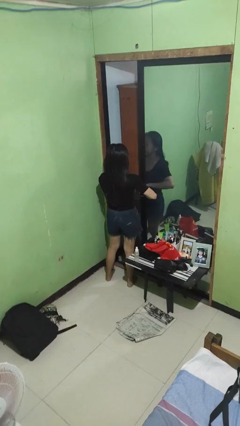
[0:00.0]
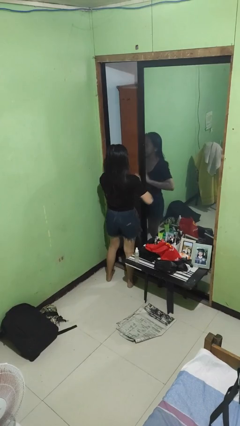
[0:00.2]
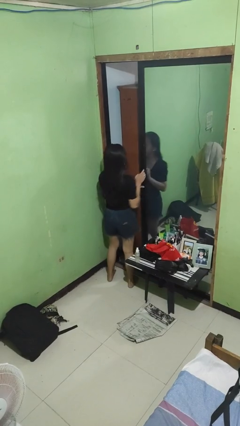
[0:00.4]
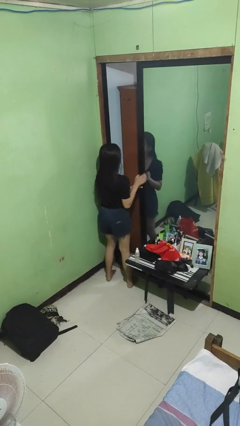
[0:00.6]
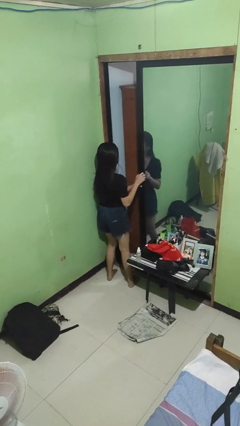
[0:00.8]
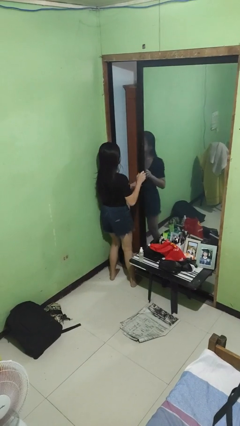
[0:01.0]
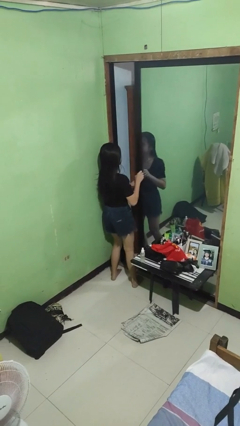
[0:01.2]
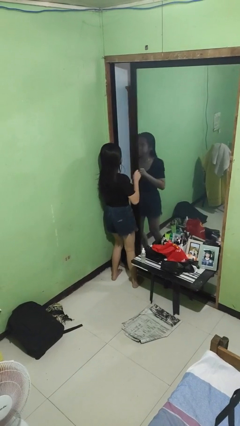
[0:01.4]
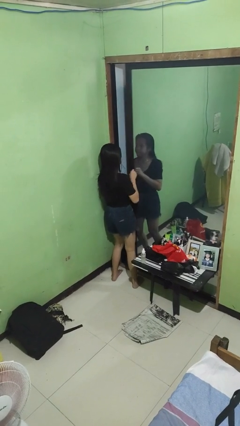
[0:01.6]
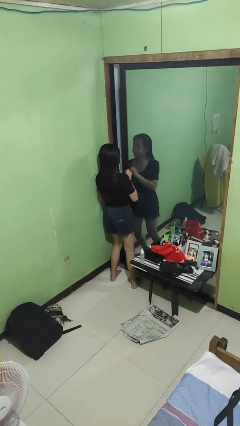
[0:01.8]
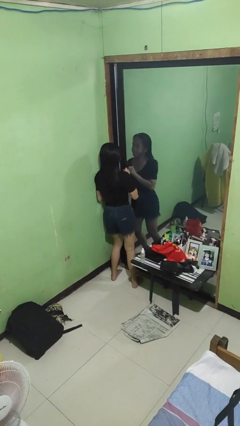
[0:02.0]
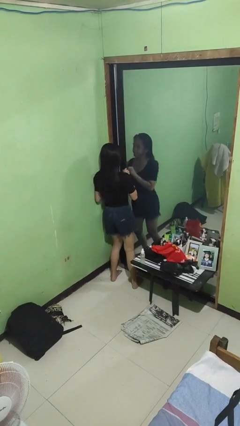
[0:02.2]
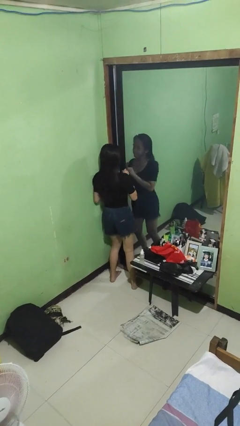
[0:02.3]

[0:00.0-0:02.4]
person closes sliding door

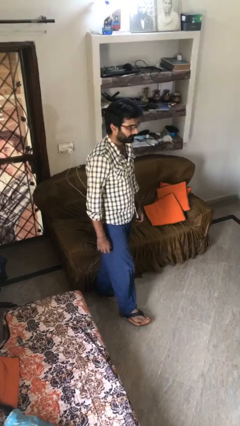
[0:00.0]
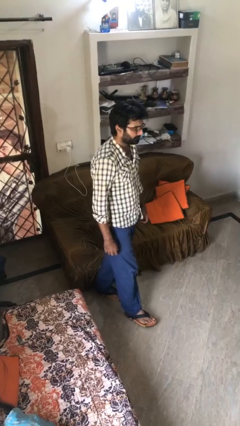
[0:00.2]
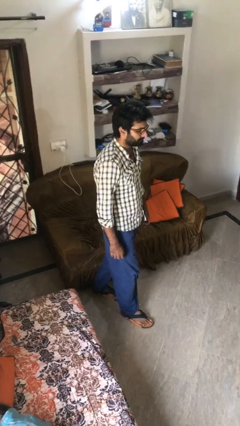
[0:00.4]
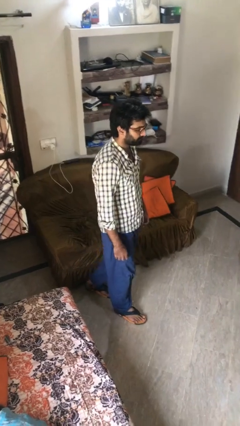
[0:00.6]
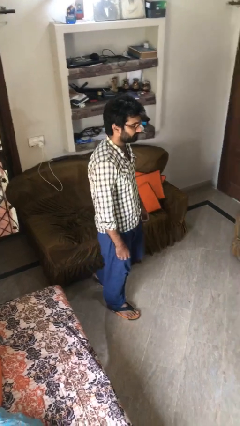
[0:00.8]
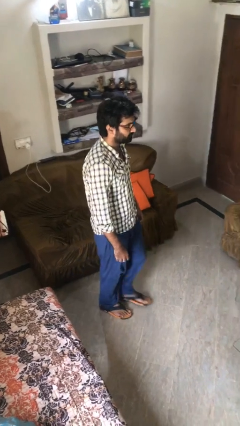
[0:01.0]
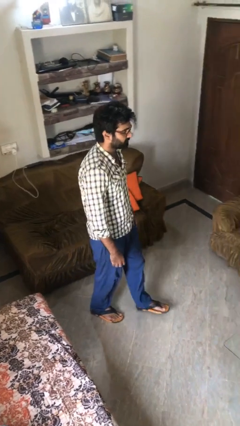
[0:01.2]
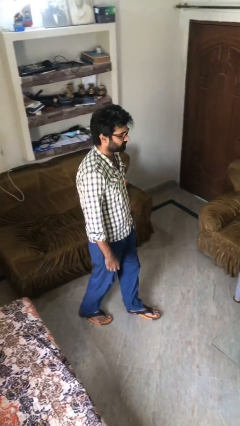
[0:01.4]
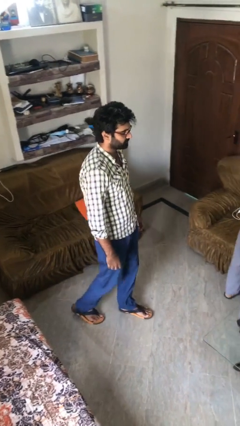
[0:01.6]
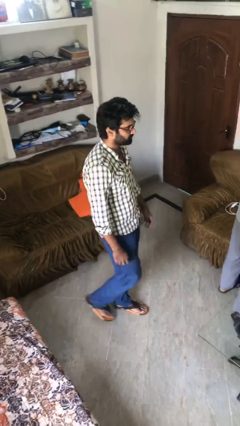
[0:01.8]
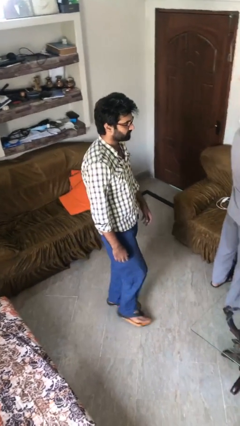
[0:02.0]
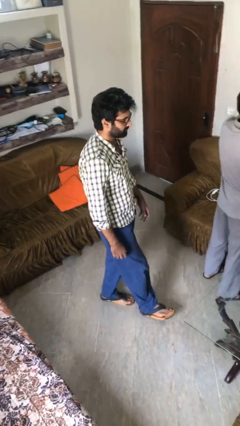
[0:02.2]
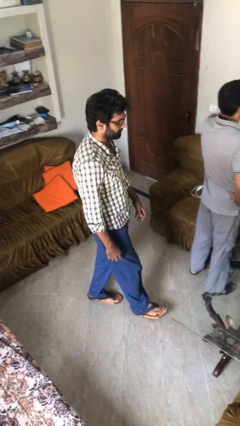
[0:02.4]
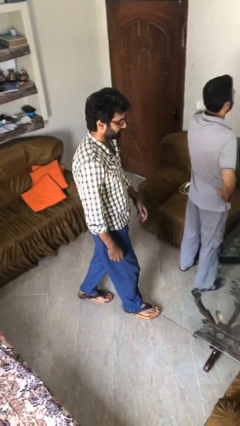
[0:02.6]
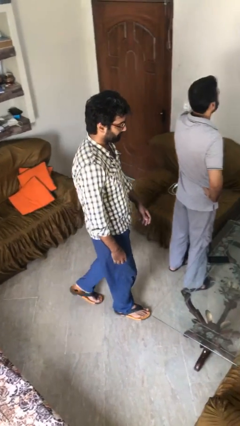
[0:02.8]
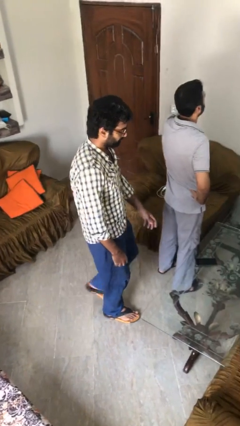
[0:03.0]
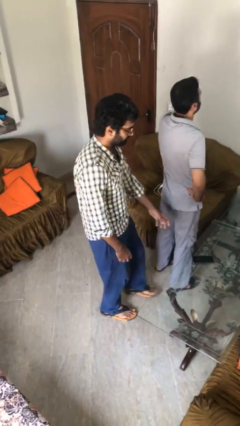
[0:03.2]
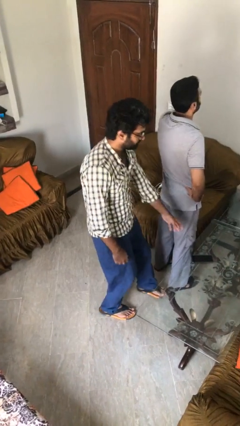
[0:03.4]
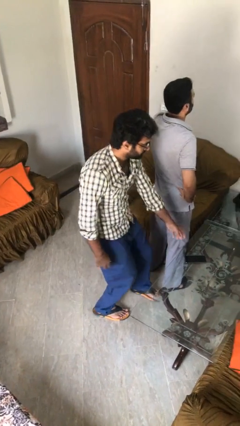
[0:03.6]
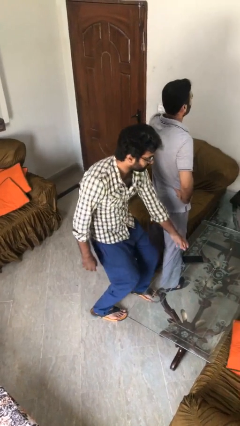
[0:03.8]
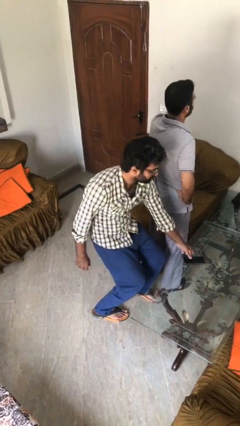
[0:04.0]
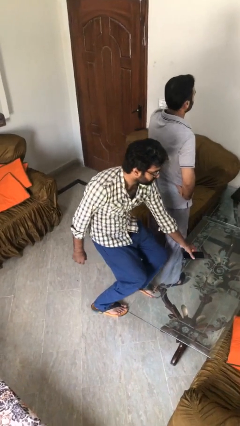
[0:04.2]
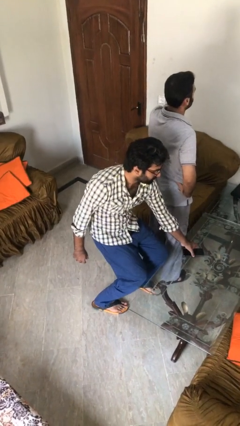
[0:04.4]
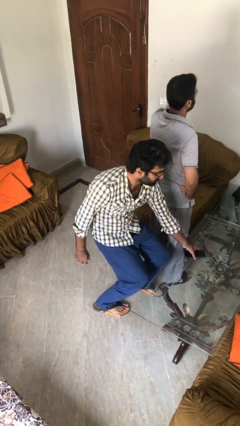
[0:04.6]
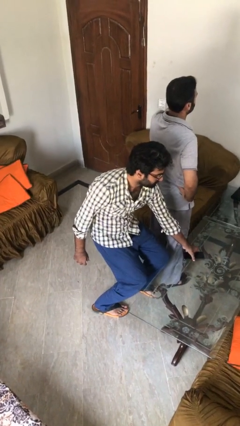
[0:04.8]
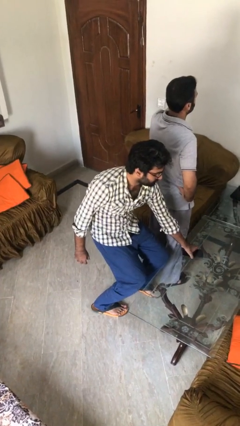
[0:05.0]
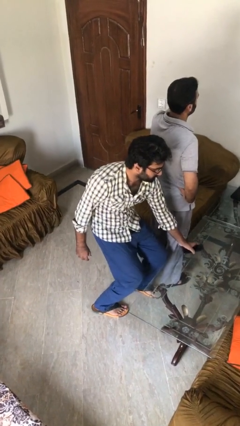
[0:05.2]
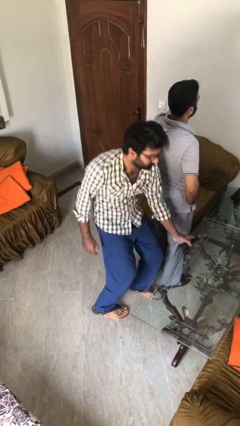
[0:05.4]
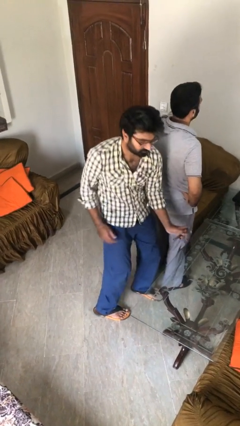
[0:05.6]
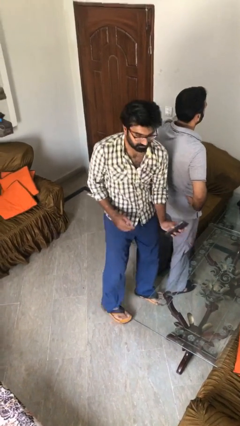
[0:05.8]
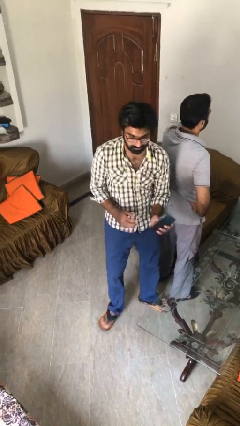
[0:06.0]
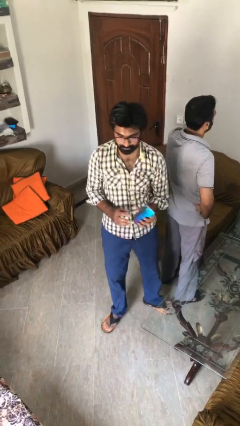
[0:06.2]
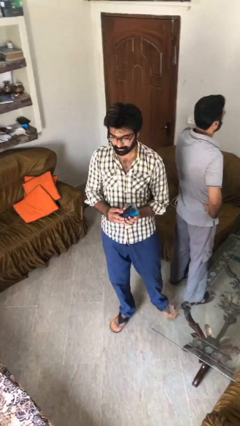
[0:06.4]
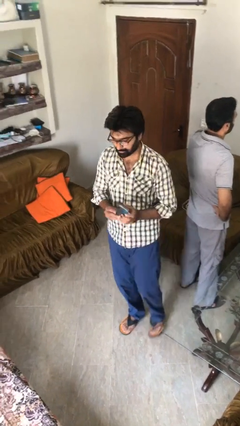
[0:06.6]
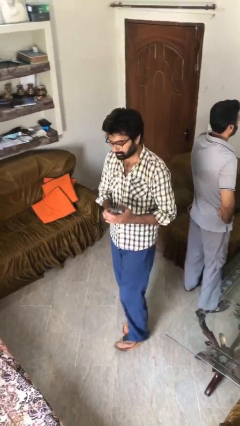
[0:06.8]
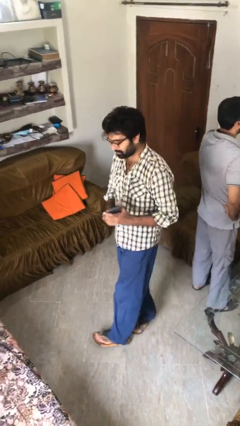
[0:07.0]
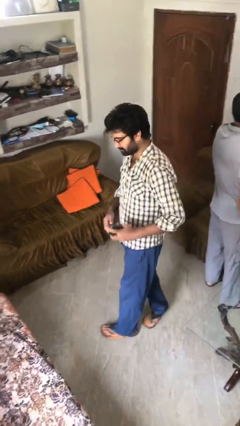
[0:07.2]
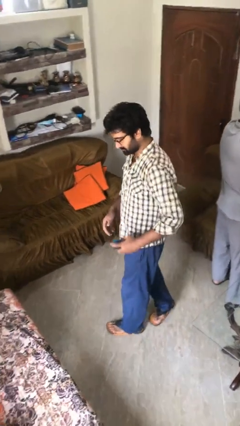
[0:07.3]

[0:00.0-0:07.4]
person steals object from person

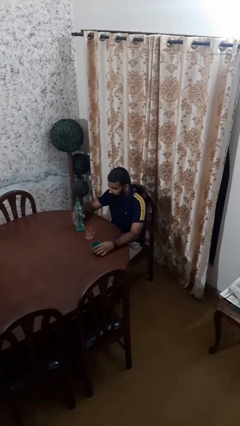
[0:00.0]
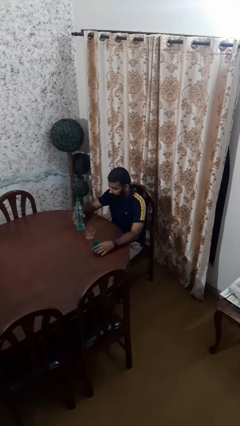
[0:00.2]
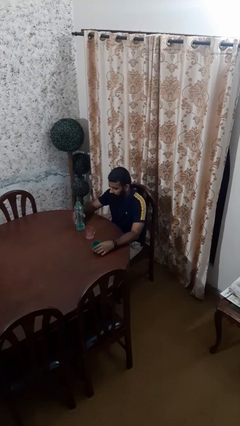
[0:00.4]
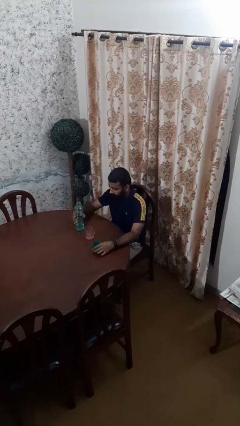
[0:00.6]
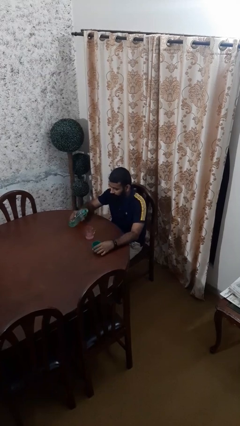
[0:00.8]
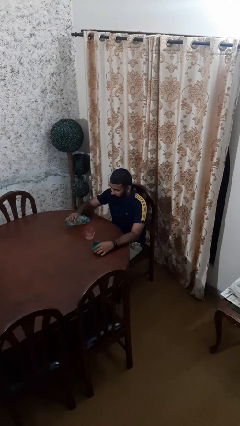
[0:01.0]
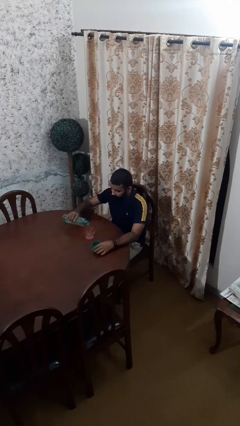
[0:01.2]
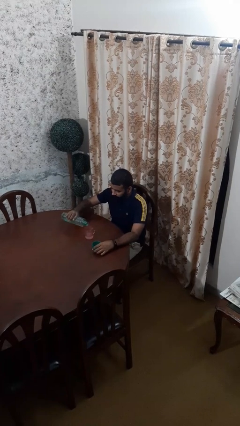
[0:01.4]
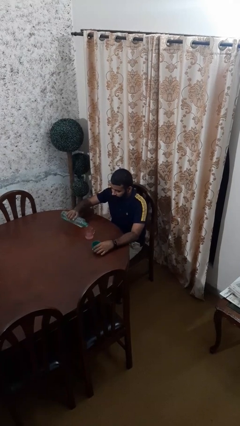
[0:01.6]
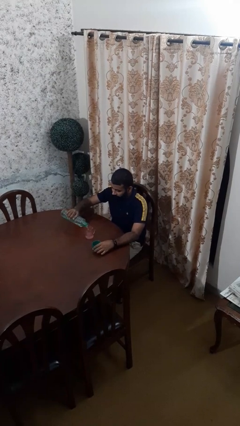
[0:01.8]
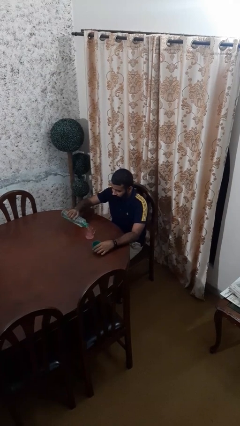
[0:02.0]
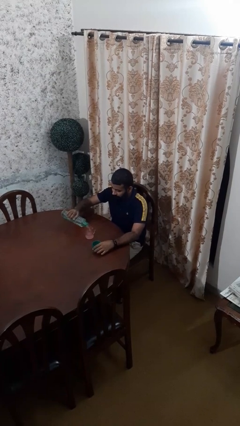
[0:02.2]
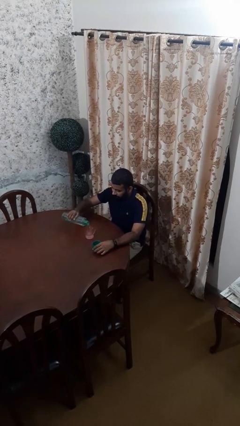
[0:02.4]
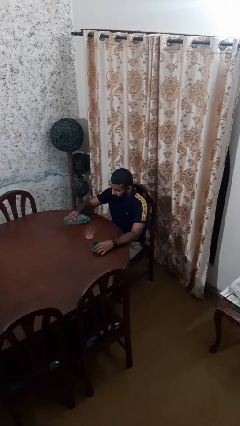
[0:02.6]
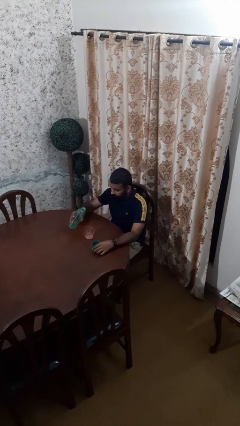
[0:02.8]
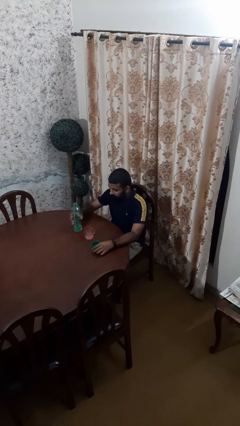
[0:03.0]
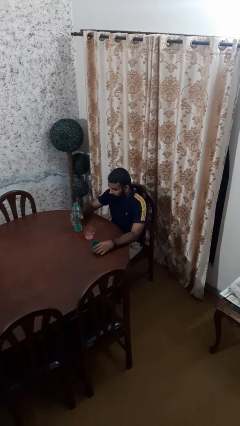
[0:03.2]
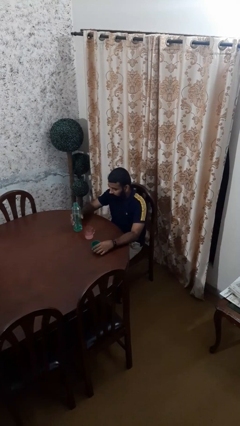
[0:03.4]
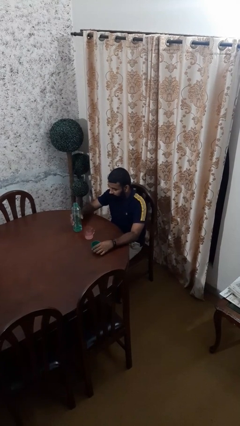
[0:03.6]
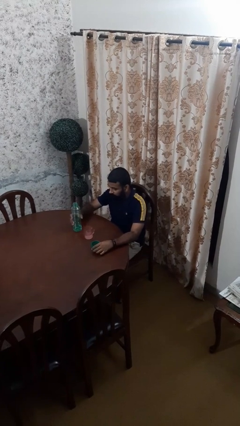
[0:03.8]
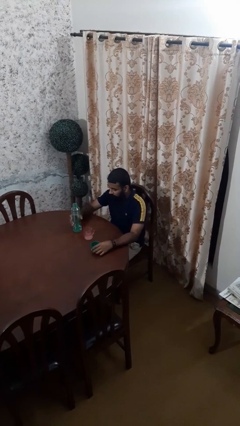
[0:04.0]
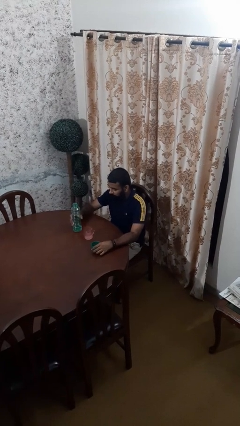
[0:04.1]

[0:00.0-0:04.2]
person pours liquid into cup

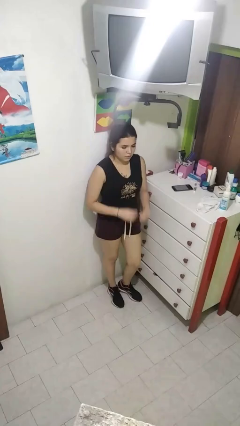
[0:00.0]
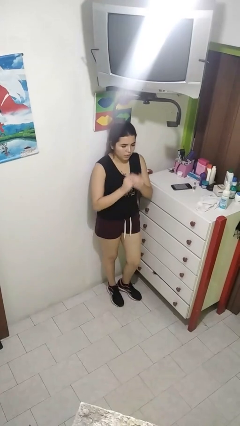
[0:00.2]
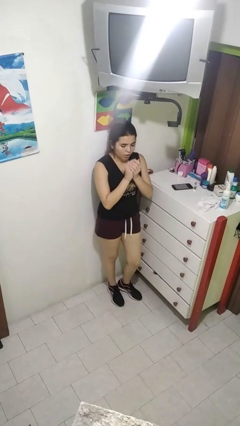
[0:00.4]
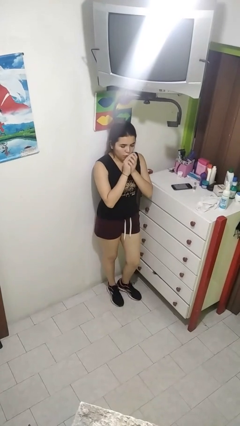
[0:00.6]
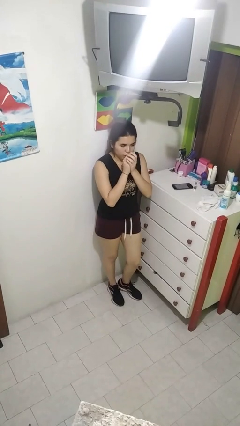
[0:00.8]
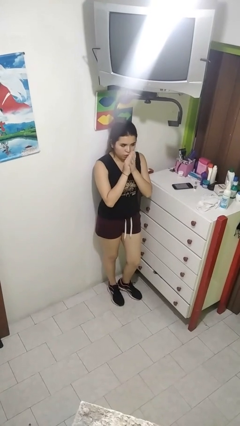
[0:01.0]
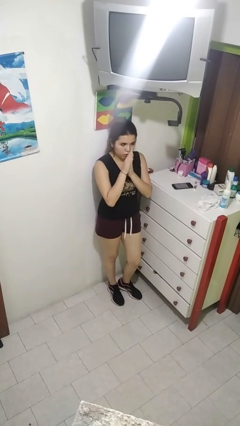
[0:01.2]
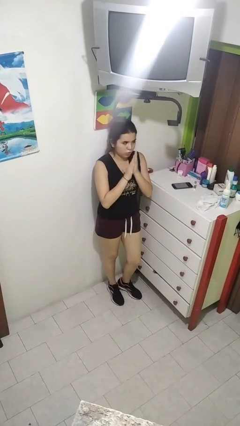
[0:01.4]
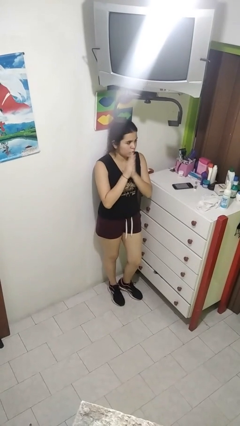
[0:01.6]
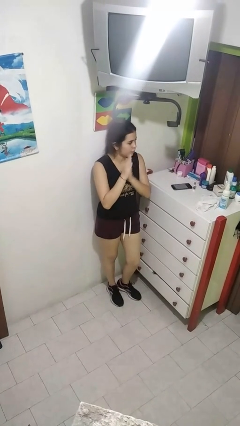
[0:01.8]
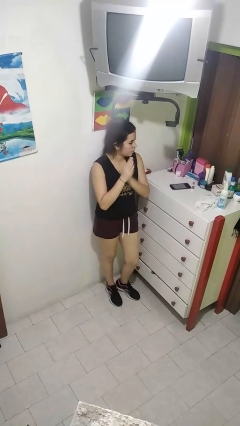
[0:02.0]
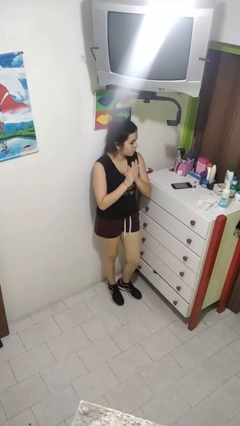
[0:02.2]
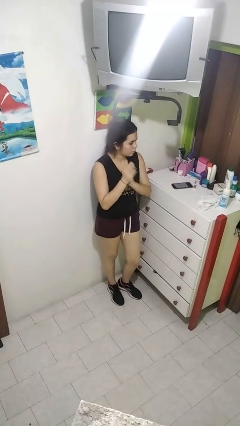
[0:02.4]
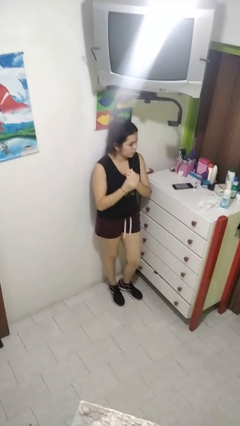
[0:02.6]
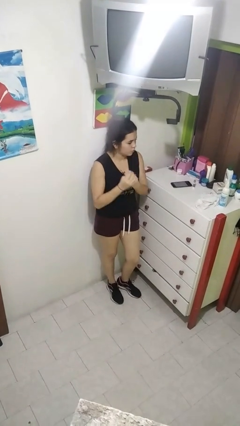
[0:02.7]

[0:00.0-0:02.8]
person blows into hands

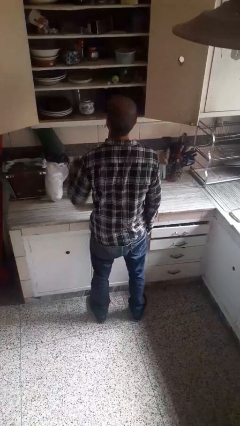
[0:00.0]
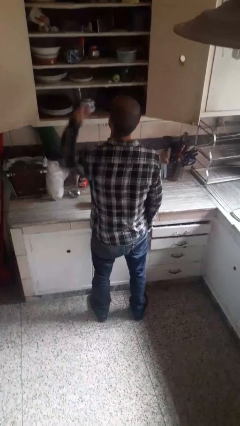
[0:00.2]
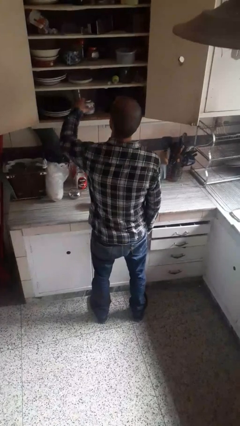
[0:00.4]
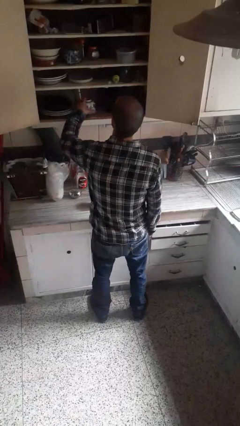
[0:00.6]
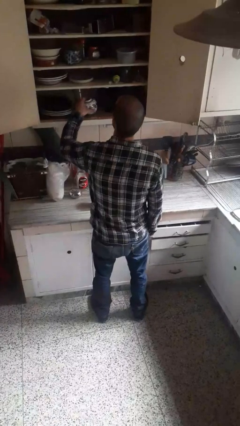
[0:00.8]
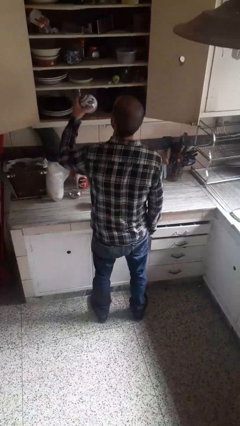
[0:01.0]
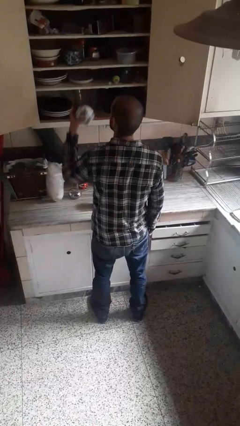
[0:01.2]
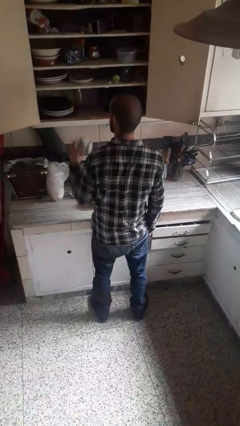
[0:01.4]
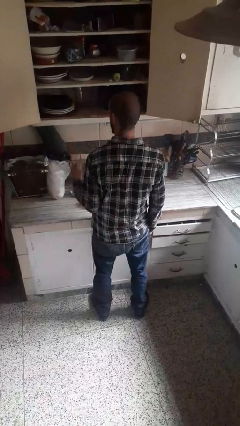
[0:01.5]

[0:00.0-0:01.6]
person takes object from cabinet
